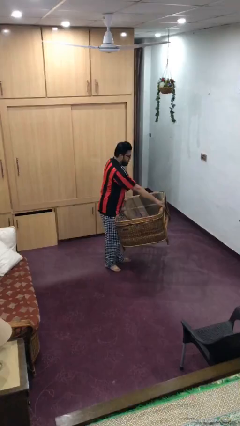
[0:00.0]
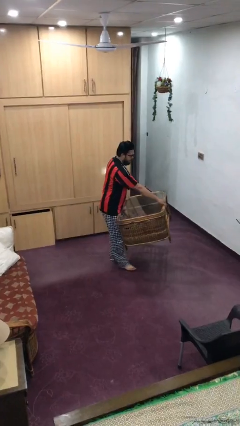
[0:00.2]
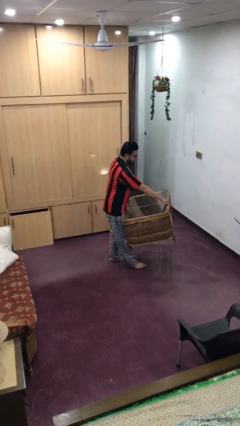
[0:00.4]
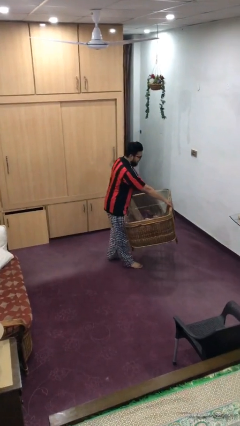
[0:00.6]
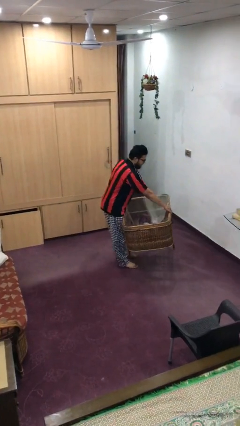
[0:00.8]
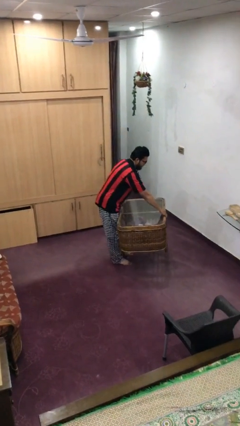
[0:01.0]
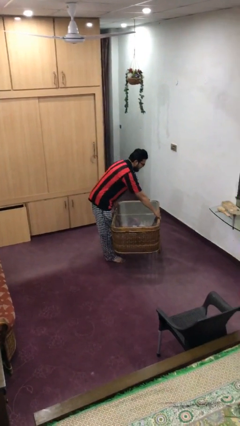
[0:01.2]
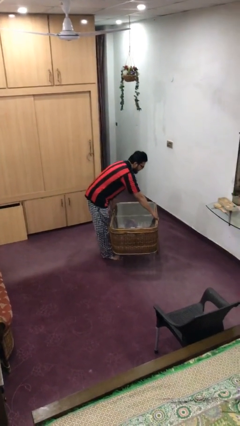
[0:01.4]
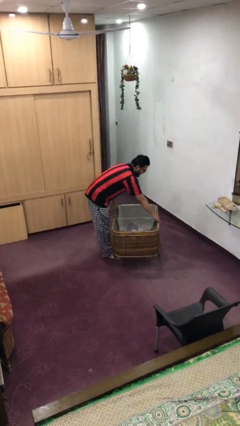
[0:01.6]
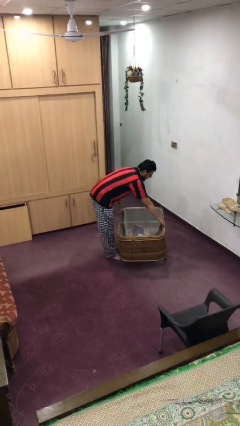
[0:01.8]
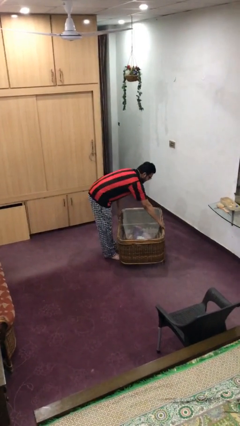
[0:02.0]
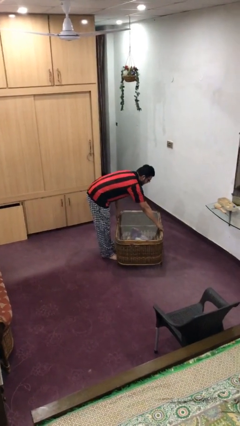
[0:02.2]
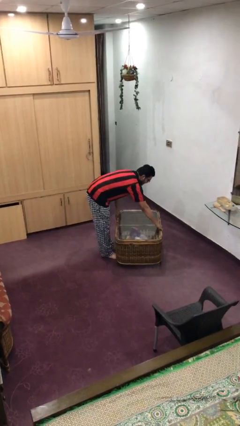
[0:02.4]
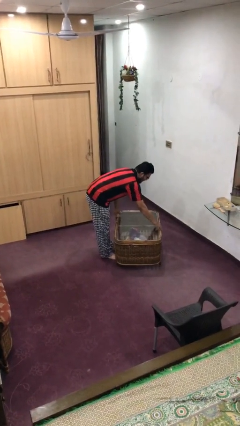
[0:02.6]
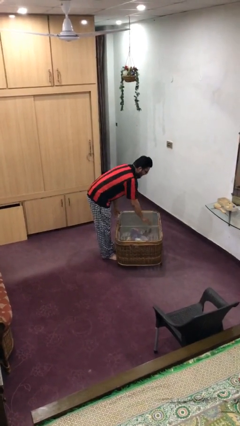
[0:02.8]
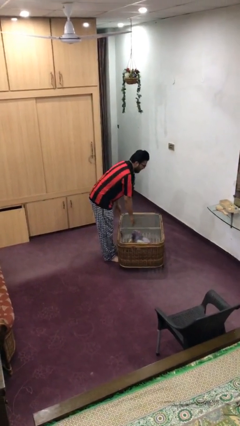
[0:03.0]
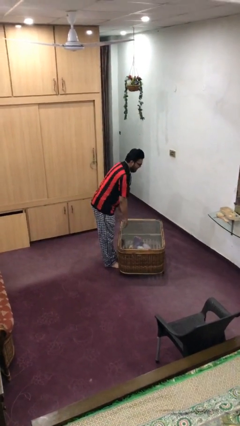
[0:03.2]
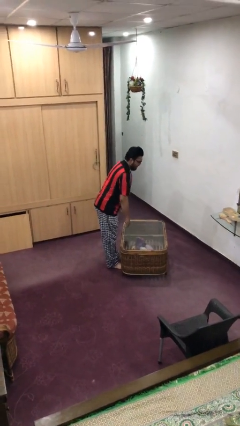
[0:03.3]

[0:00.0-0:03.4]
person puts down object on floor

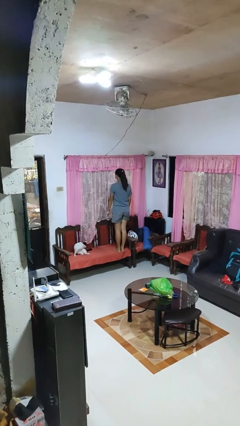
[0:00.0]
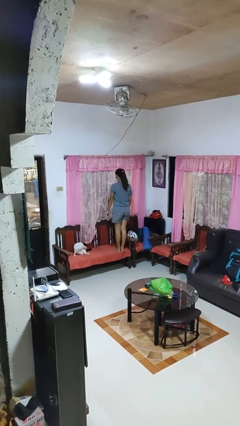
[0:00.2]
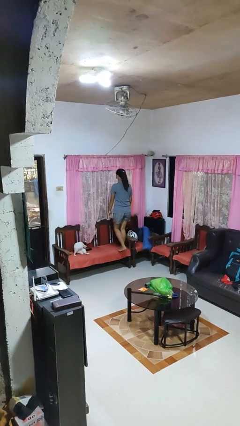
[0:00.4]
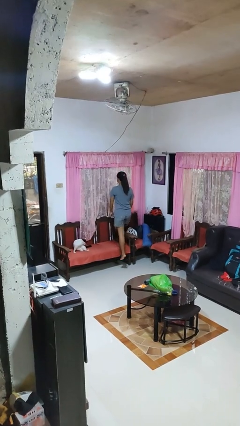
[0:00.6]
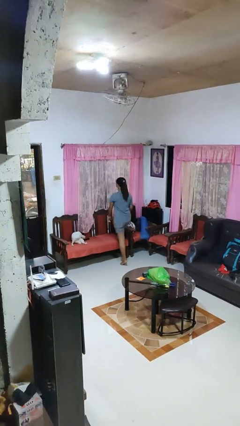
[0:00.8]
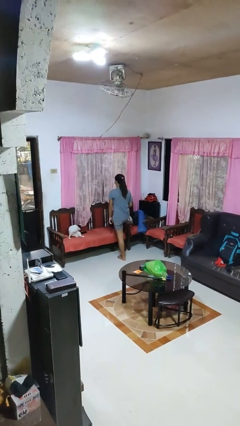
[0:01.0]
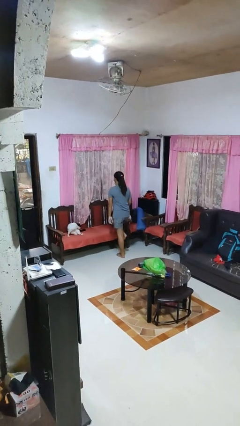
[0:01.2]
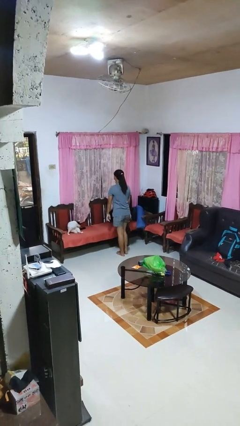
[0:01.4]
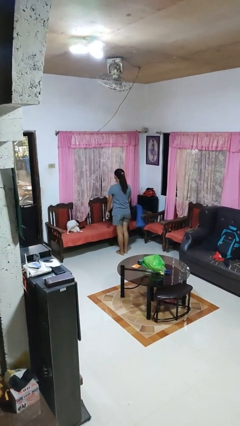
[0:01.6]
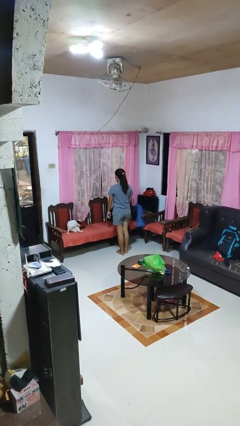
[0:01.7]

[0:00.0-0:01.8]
person climbs off chair

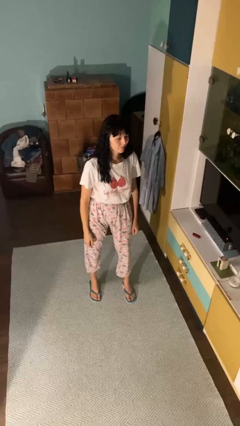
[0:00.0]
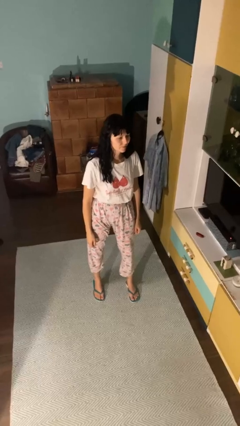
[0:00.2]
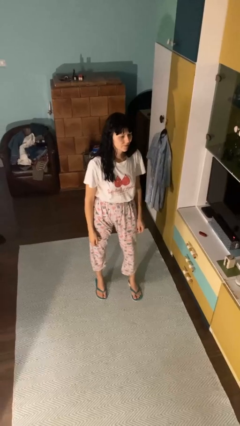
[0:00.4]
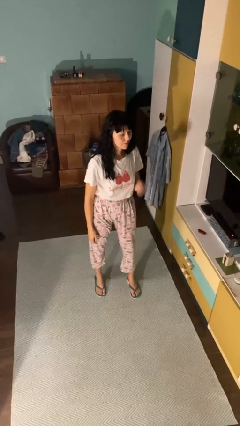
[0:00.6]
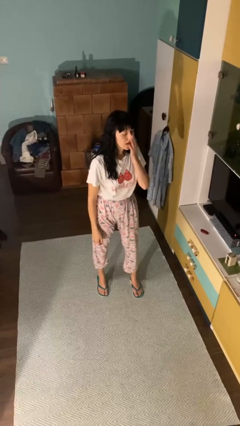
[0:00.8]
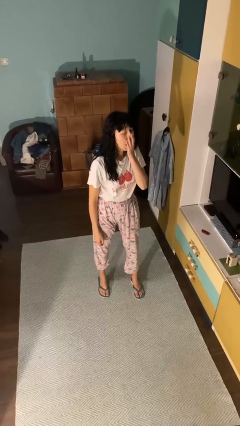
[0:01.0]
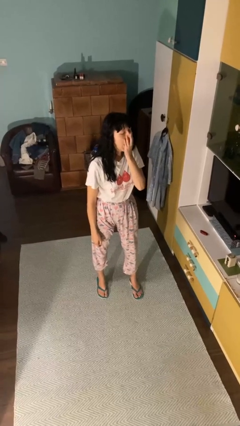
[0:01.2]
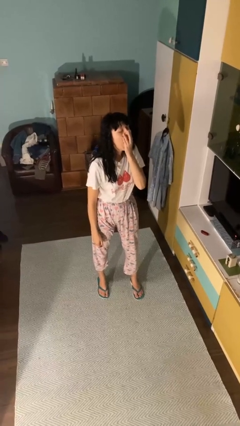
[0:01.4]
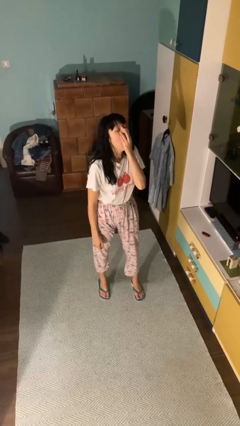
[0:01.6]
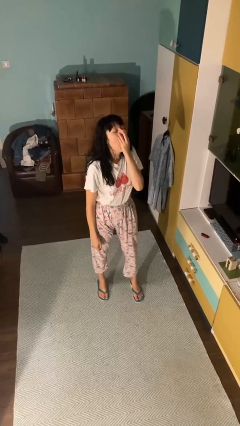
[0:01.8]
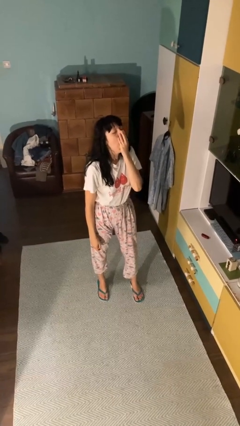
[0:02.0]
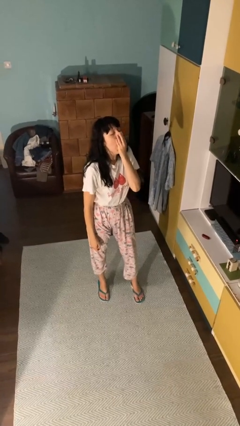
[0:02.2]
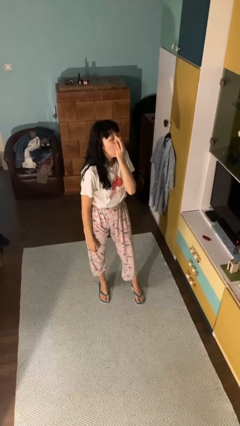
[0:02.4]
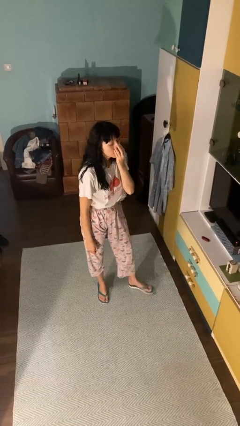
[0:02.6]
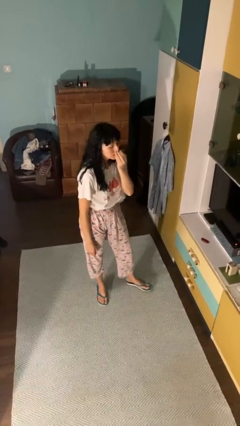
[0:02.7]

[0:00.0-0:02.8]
person yawns

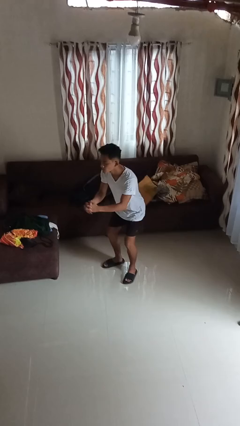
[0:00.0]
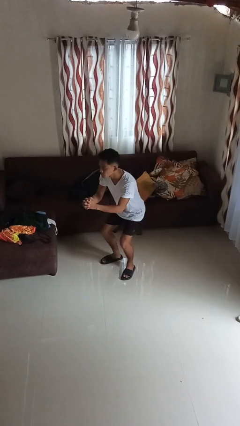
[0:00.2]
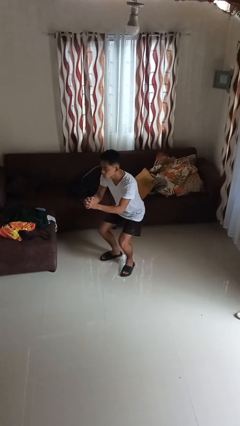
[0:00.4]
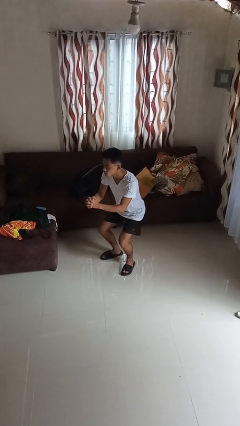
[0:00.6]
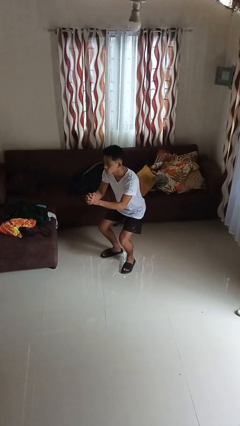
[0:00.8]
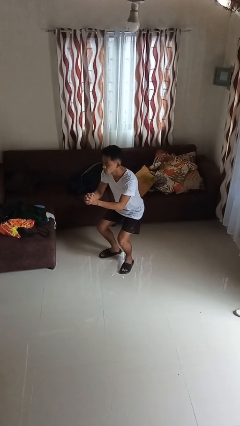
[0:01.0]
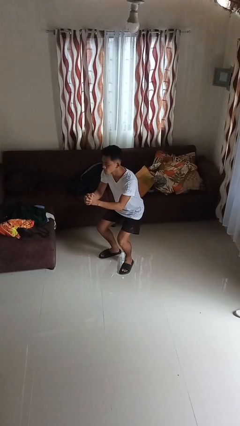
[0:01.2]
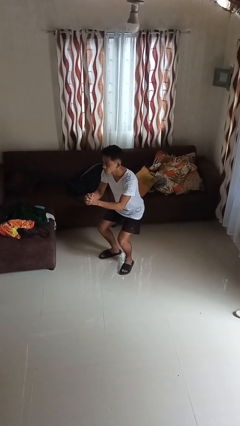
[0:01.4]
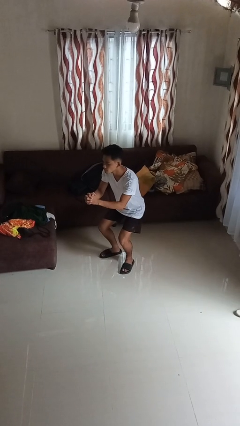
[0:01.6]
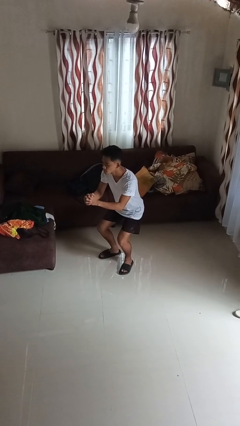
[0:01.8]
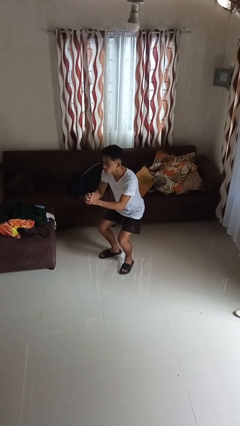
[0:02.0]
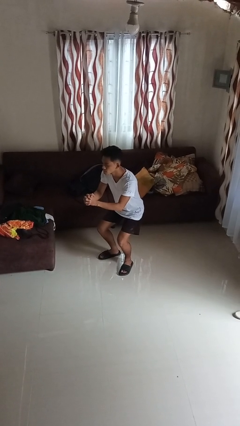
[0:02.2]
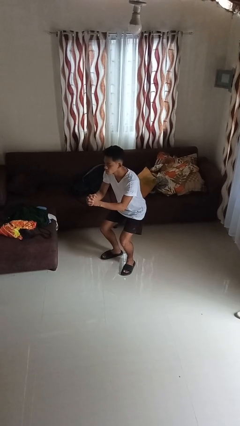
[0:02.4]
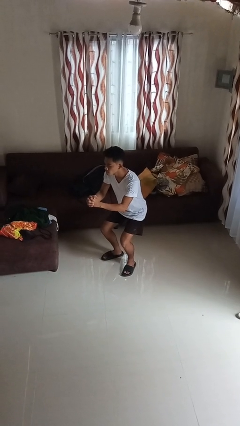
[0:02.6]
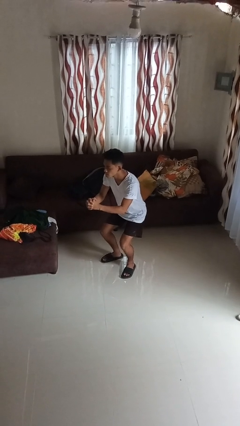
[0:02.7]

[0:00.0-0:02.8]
person squats

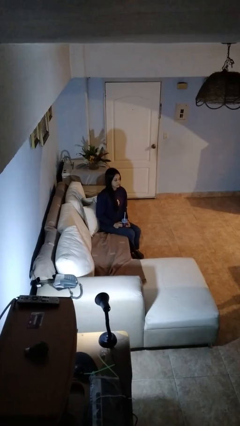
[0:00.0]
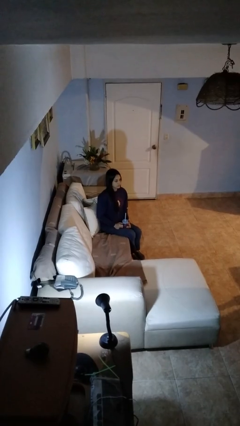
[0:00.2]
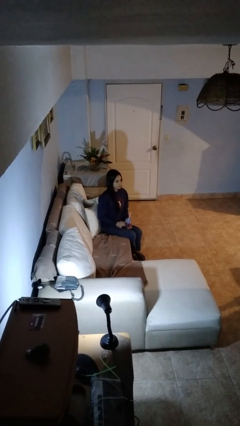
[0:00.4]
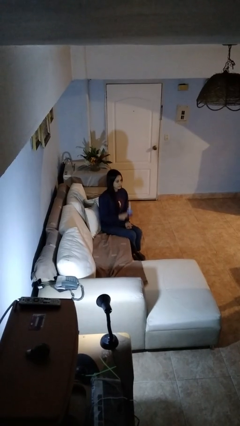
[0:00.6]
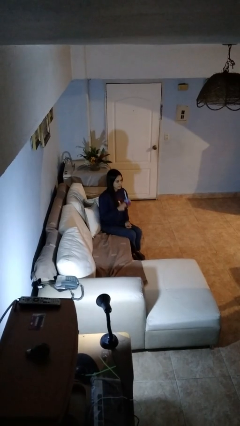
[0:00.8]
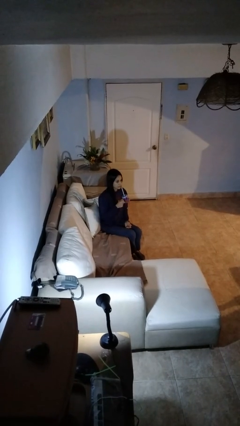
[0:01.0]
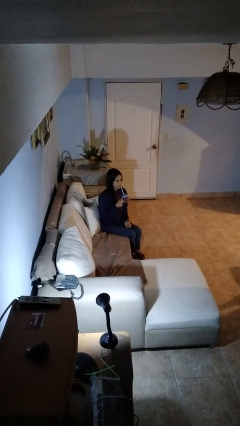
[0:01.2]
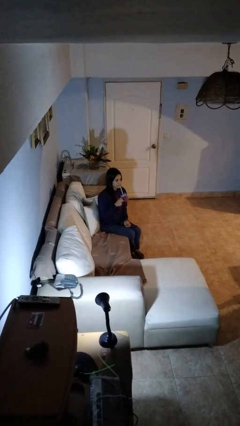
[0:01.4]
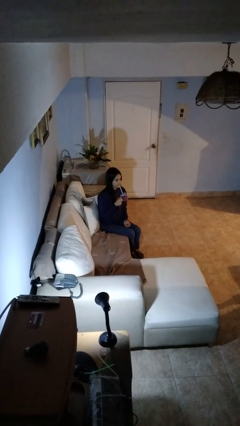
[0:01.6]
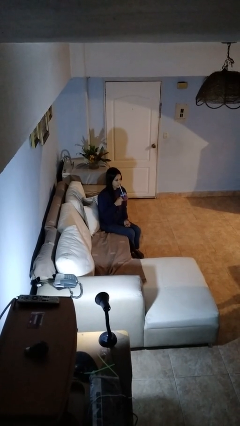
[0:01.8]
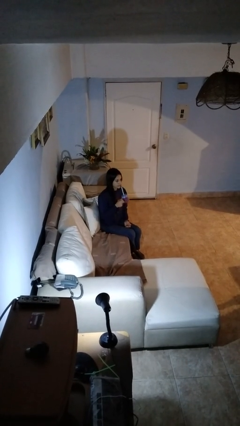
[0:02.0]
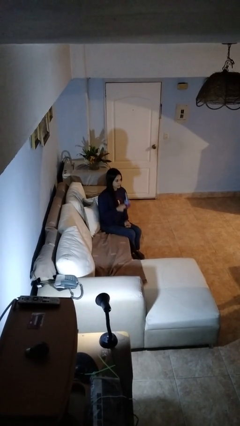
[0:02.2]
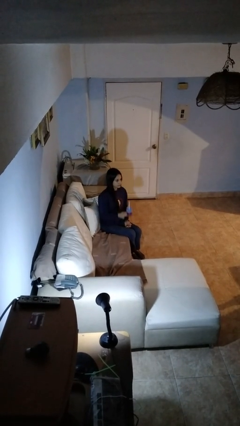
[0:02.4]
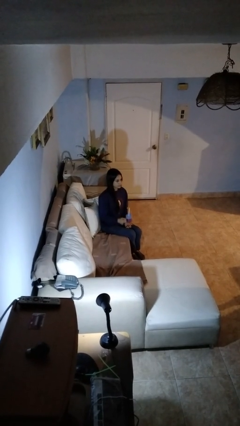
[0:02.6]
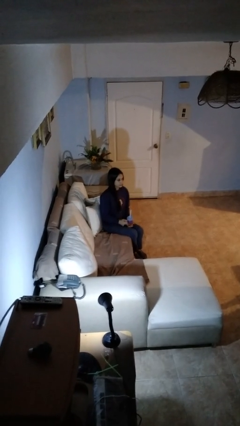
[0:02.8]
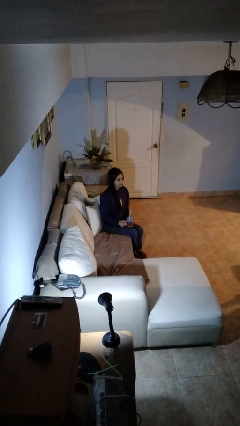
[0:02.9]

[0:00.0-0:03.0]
person drinks from straw

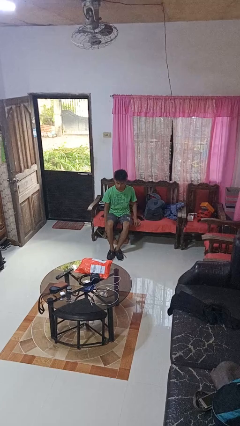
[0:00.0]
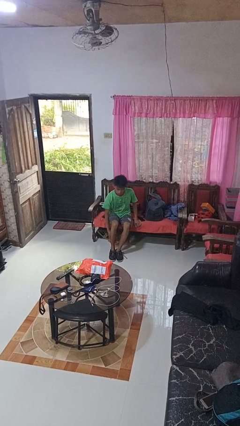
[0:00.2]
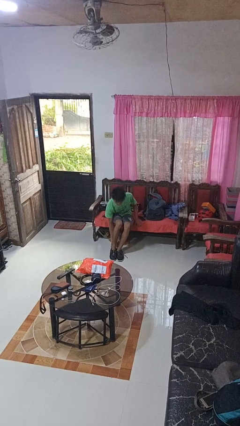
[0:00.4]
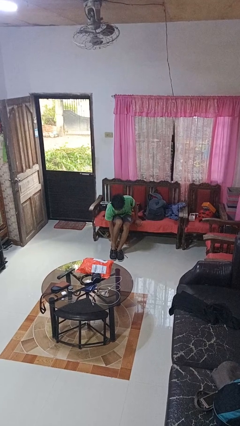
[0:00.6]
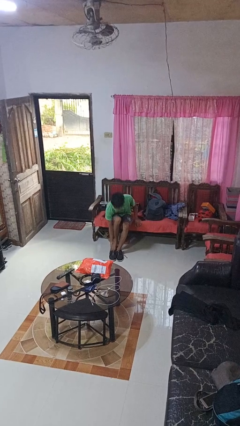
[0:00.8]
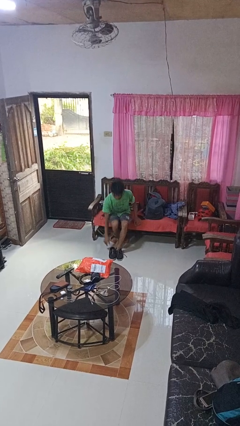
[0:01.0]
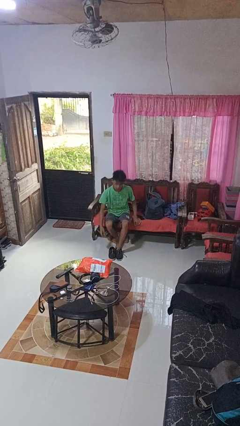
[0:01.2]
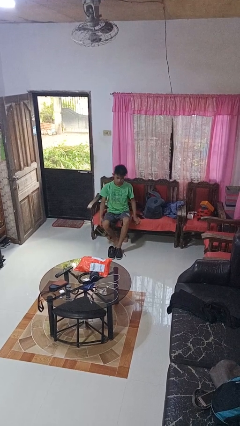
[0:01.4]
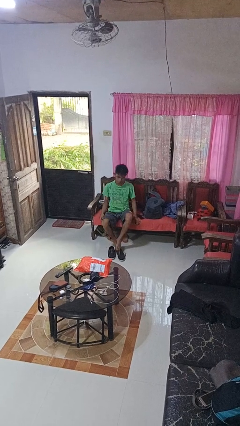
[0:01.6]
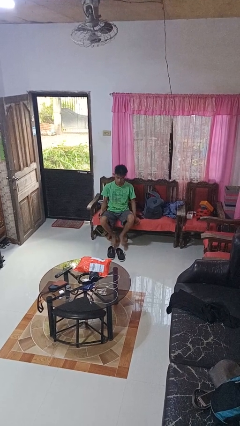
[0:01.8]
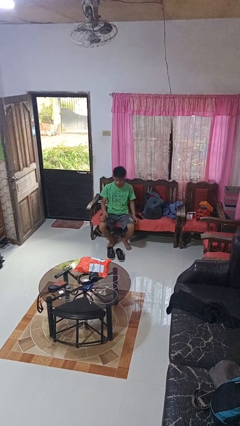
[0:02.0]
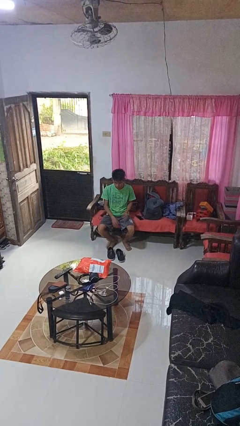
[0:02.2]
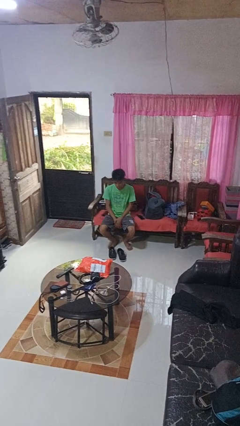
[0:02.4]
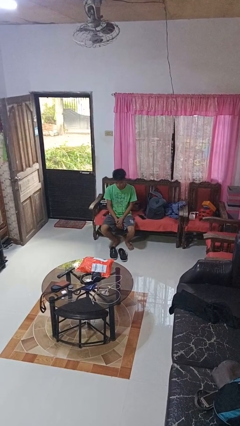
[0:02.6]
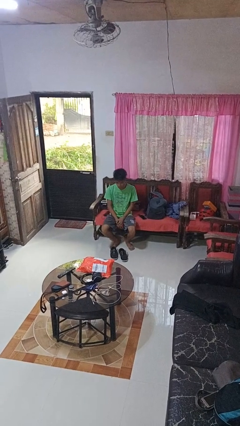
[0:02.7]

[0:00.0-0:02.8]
person takes off shoes

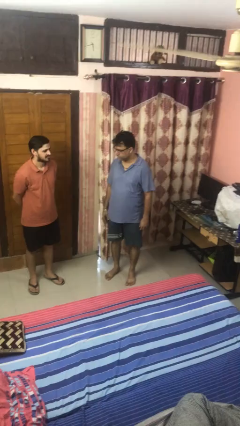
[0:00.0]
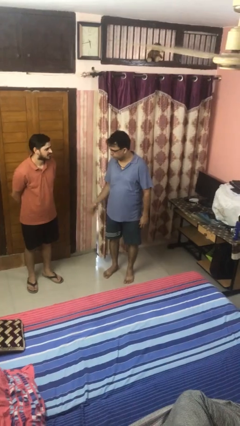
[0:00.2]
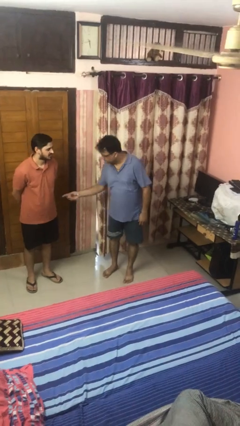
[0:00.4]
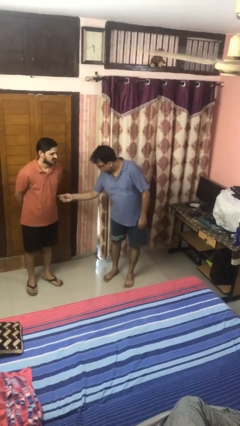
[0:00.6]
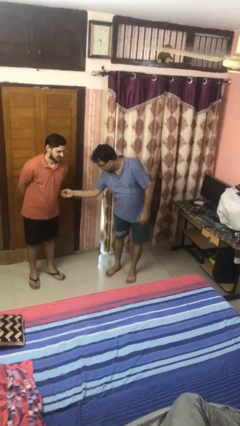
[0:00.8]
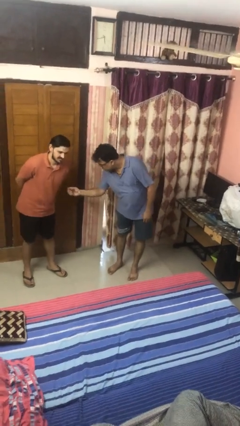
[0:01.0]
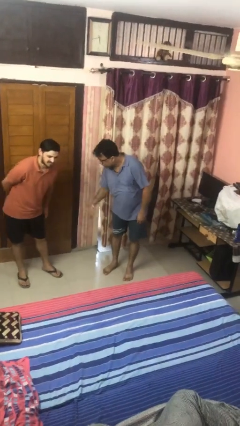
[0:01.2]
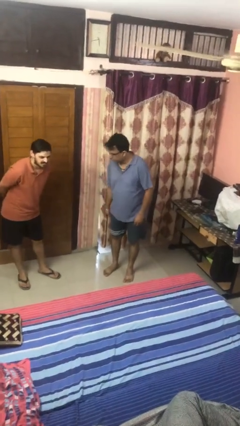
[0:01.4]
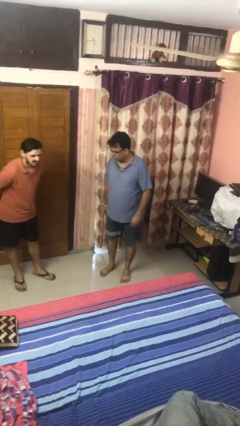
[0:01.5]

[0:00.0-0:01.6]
person tickles person
